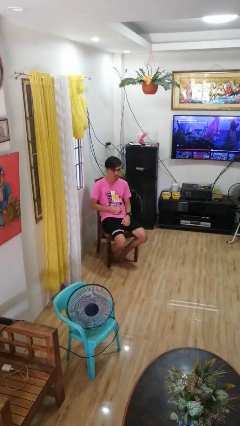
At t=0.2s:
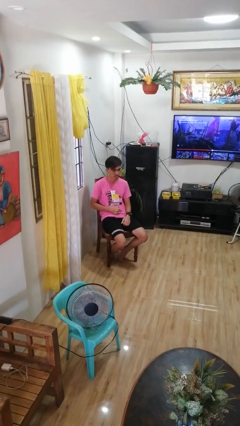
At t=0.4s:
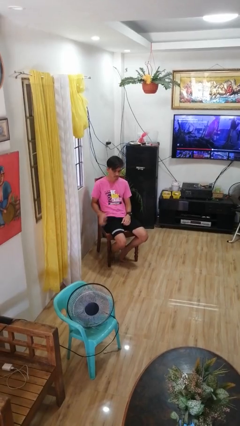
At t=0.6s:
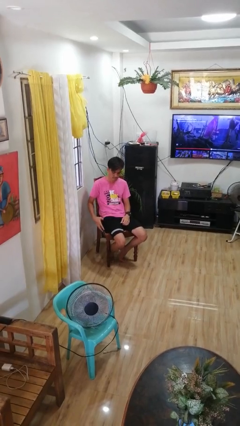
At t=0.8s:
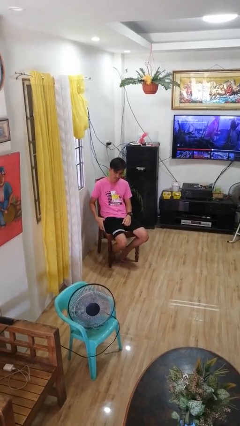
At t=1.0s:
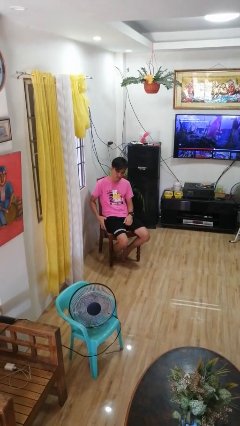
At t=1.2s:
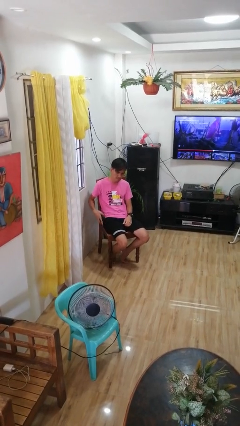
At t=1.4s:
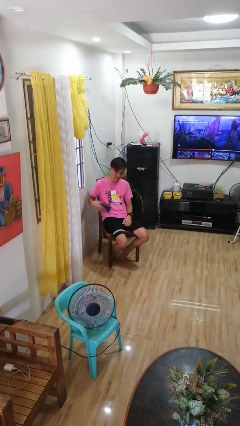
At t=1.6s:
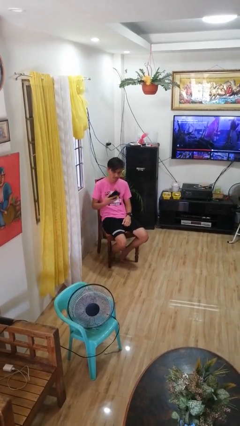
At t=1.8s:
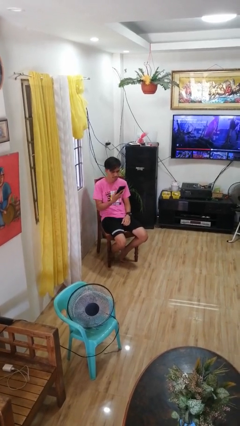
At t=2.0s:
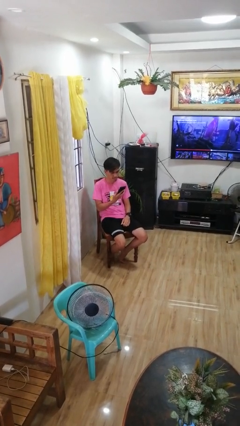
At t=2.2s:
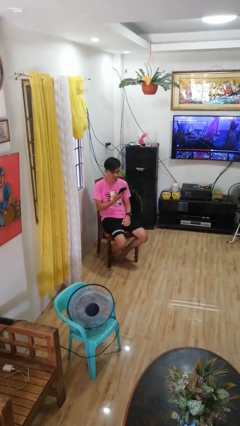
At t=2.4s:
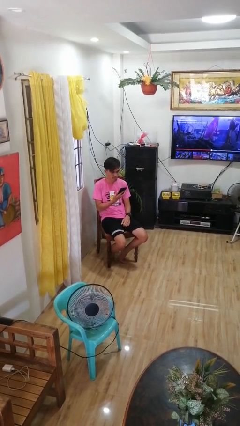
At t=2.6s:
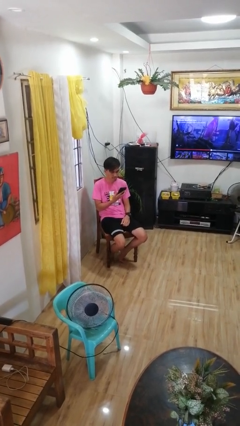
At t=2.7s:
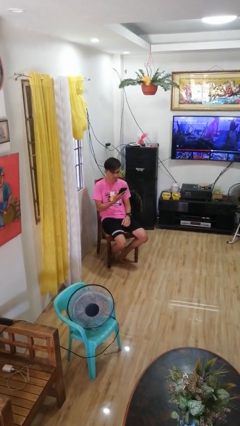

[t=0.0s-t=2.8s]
person takes phone from pocket

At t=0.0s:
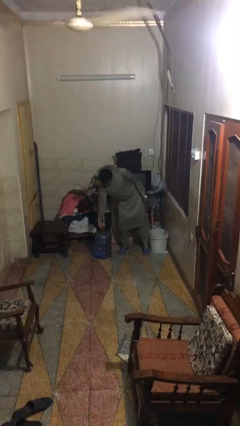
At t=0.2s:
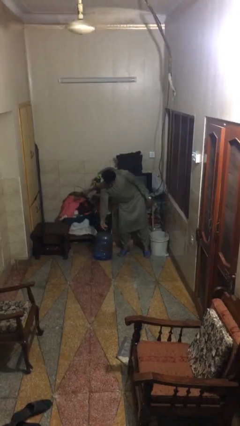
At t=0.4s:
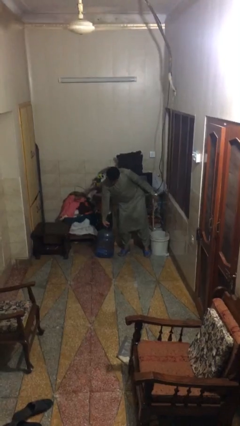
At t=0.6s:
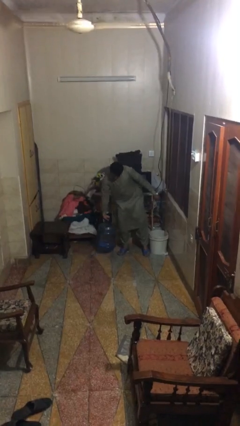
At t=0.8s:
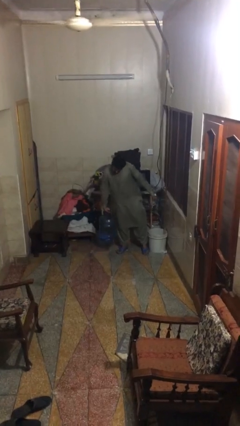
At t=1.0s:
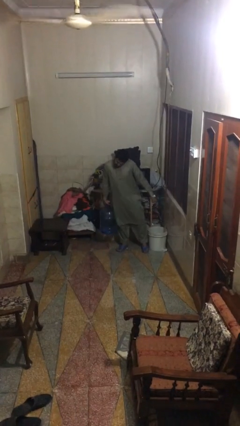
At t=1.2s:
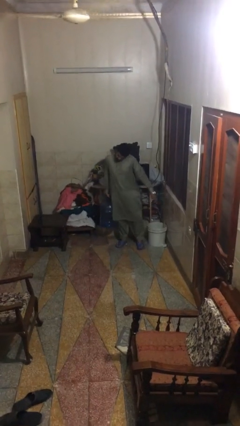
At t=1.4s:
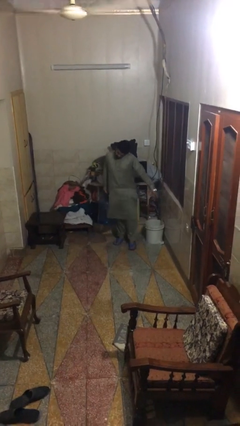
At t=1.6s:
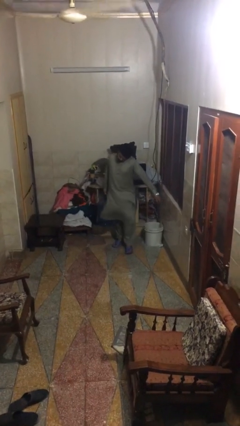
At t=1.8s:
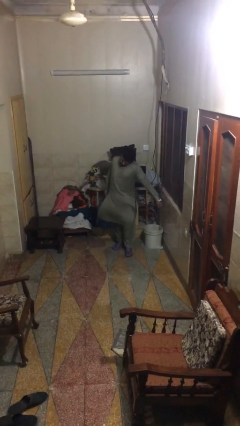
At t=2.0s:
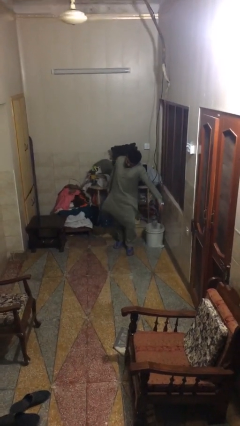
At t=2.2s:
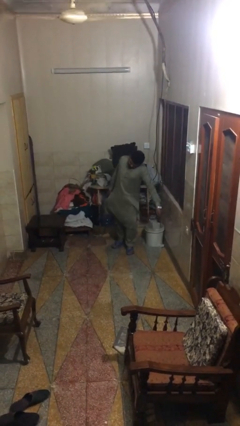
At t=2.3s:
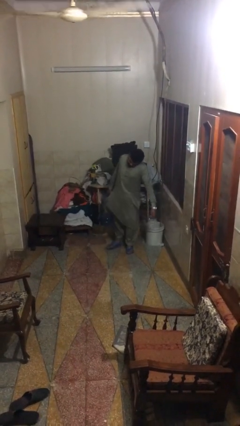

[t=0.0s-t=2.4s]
person picks up object from floor

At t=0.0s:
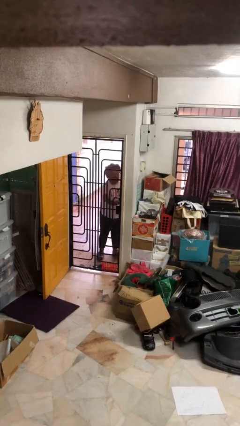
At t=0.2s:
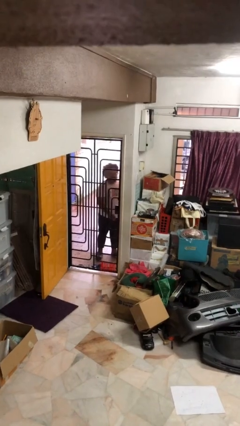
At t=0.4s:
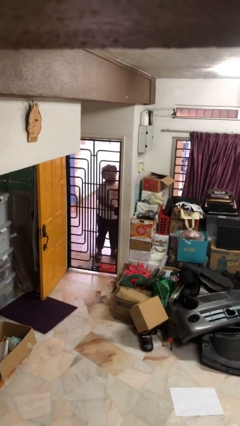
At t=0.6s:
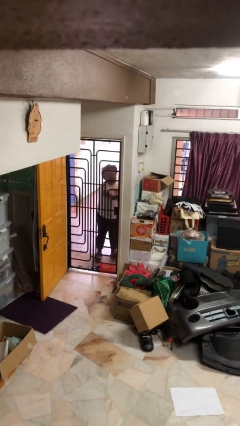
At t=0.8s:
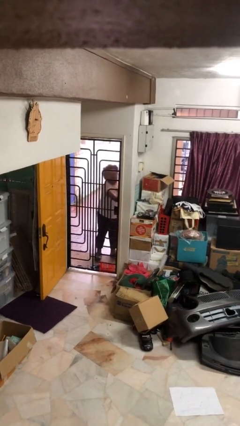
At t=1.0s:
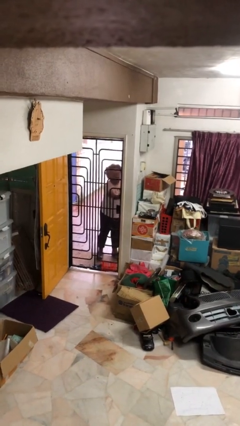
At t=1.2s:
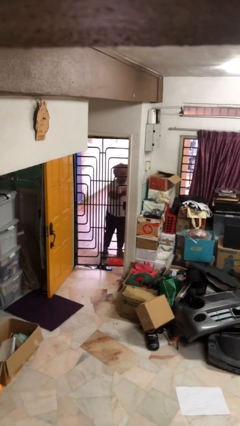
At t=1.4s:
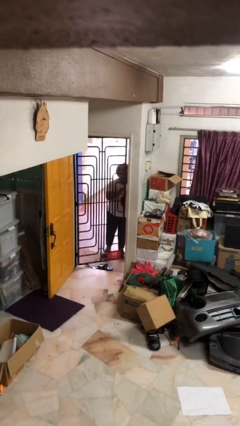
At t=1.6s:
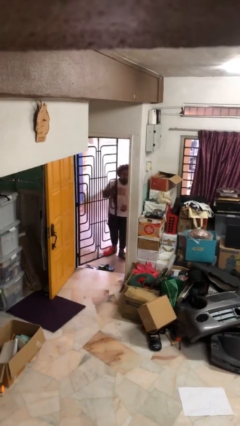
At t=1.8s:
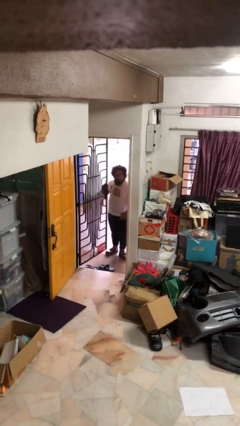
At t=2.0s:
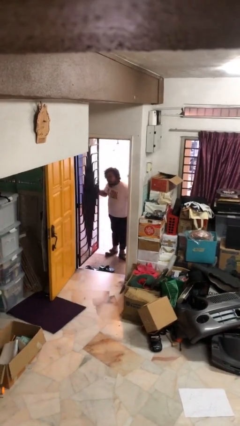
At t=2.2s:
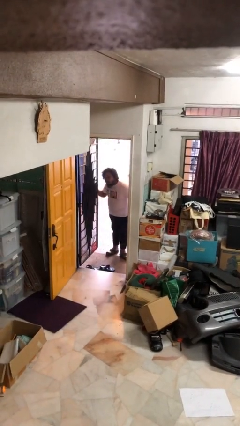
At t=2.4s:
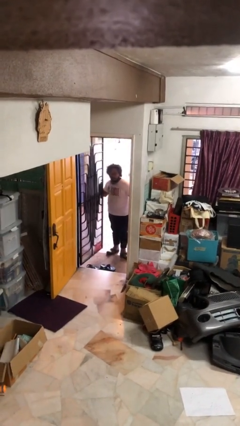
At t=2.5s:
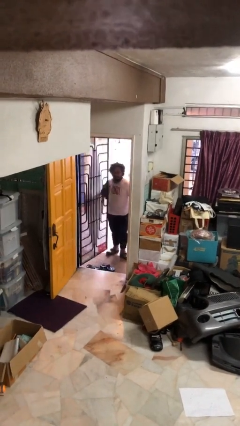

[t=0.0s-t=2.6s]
person opens facility door

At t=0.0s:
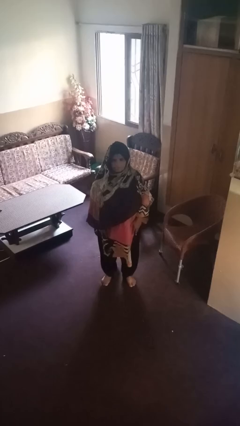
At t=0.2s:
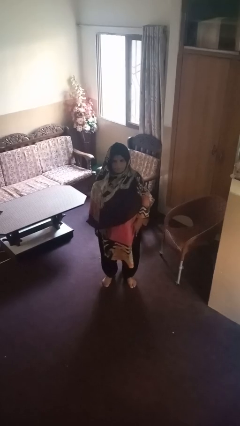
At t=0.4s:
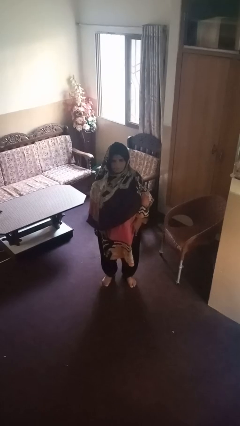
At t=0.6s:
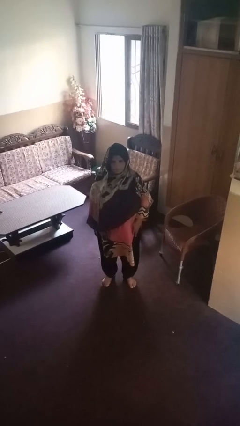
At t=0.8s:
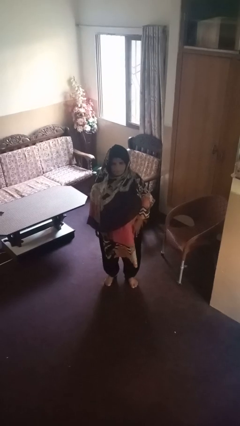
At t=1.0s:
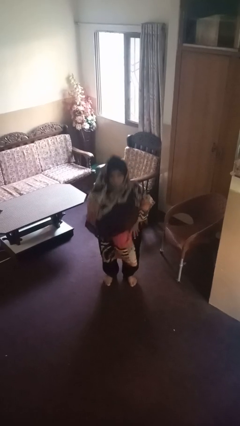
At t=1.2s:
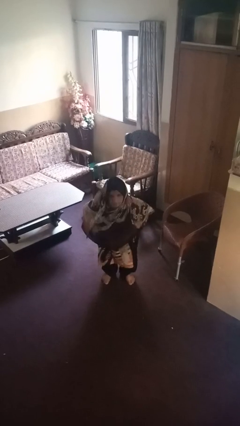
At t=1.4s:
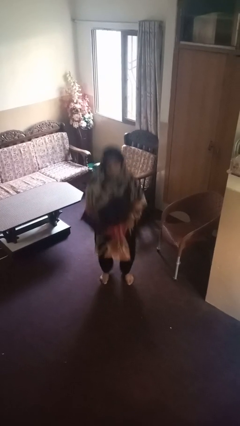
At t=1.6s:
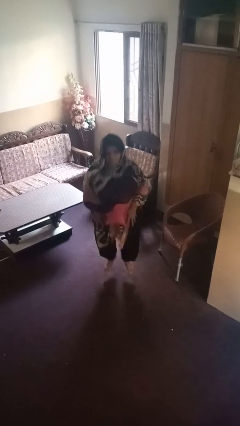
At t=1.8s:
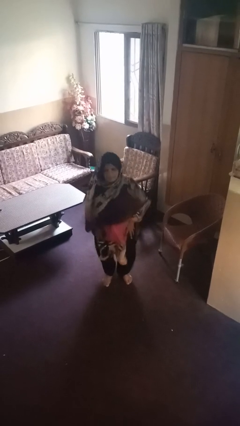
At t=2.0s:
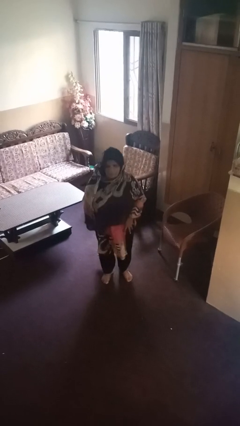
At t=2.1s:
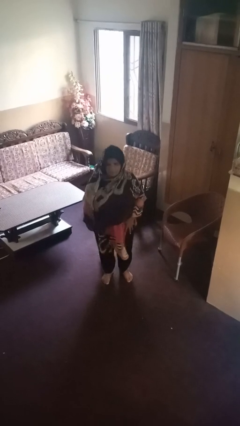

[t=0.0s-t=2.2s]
person jumps

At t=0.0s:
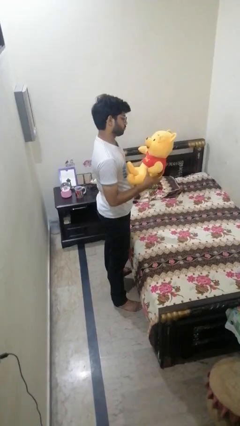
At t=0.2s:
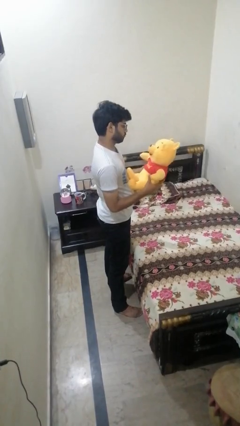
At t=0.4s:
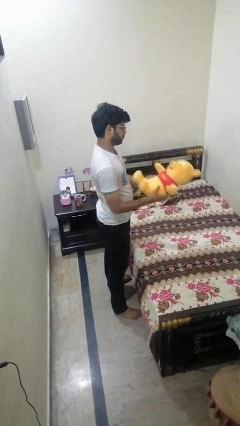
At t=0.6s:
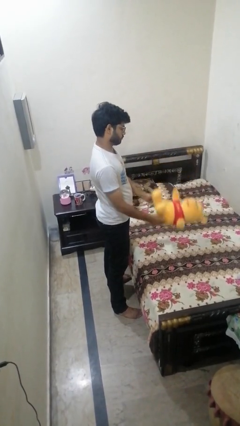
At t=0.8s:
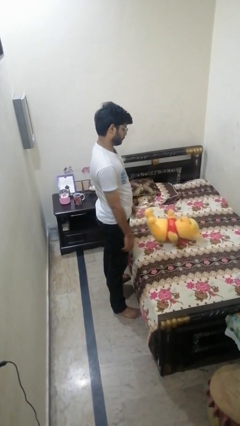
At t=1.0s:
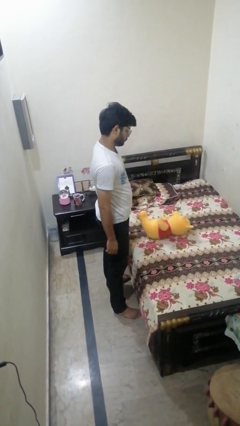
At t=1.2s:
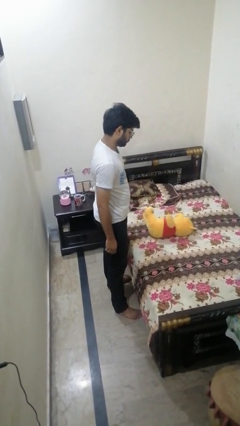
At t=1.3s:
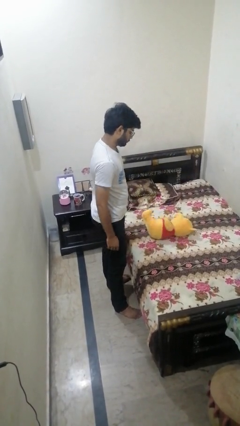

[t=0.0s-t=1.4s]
person puts down object on bed

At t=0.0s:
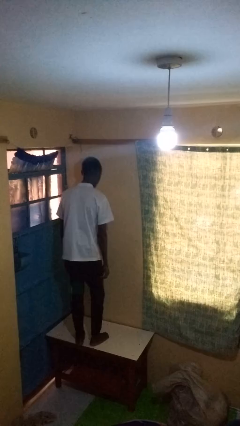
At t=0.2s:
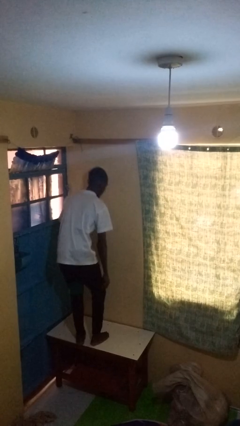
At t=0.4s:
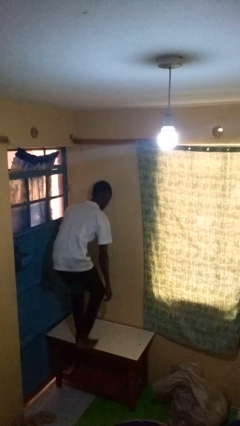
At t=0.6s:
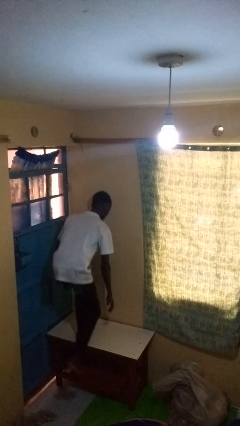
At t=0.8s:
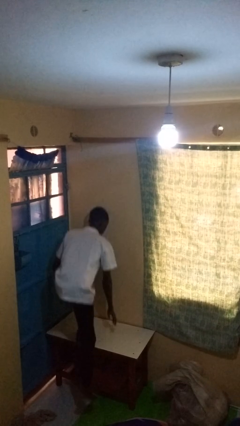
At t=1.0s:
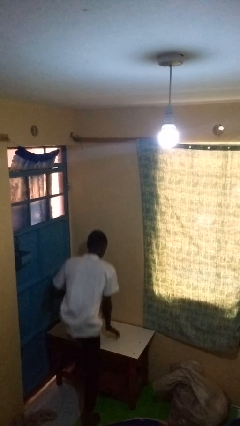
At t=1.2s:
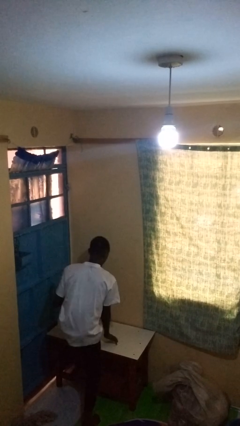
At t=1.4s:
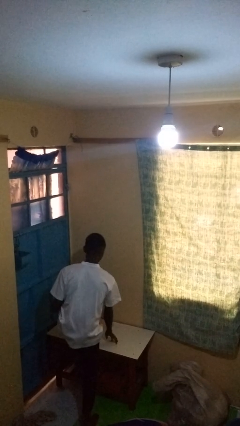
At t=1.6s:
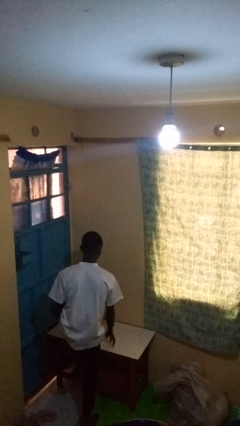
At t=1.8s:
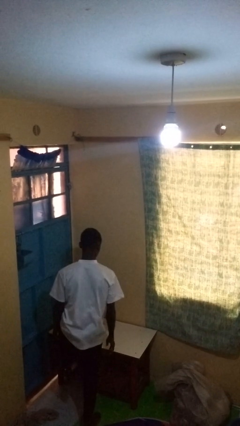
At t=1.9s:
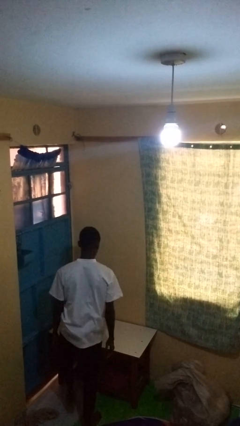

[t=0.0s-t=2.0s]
person climbs off table

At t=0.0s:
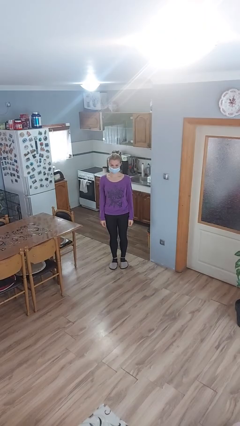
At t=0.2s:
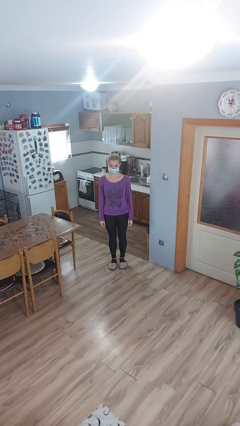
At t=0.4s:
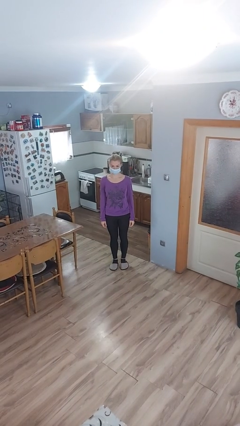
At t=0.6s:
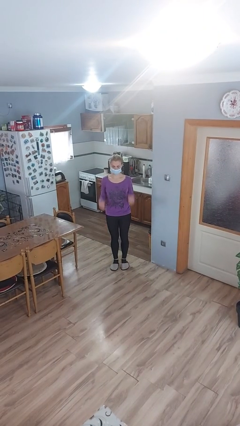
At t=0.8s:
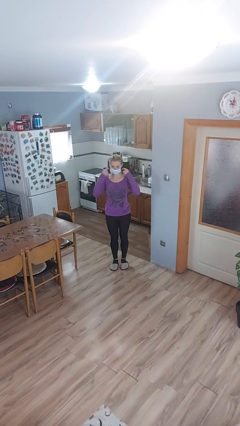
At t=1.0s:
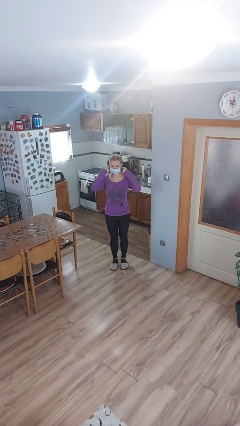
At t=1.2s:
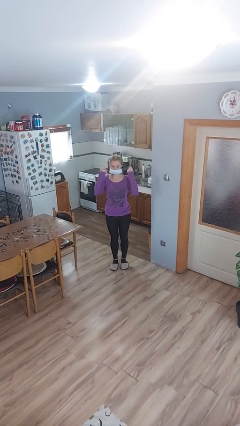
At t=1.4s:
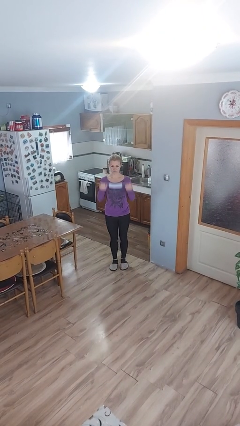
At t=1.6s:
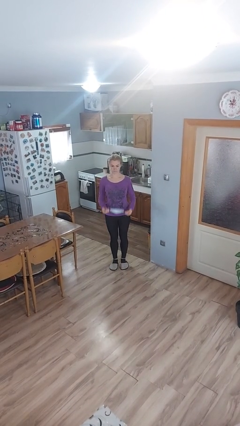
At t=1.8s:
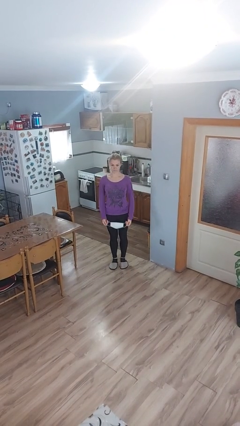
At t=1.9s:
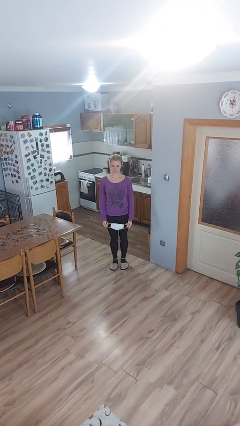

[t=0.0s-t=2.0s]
person takes off facemask

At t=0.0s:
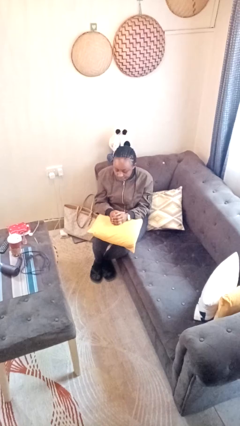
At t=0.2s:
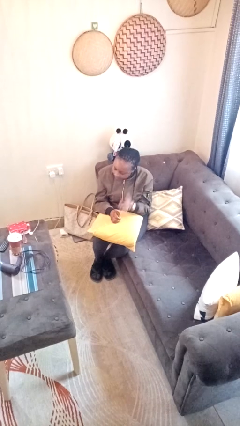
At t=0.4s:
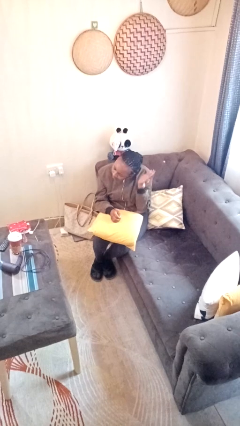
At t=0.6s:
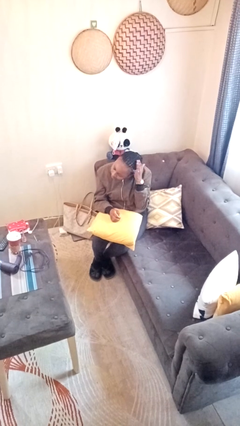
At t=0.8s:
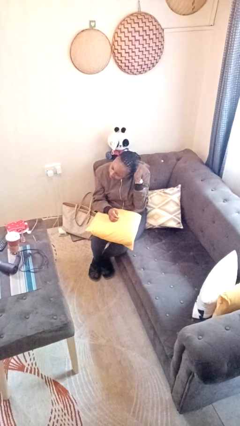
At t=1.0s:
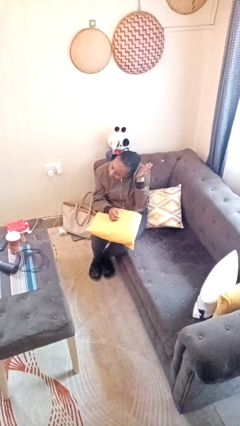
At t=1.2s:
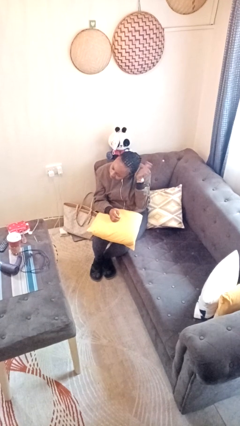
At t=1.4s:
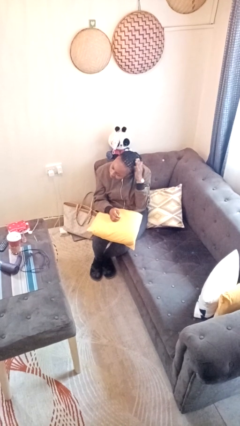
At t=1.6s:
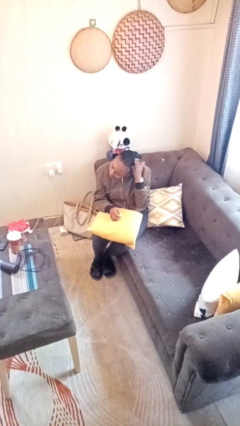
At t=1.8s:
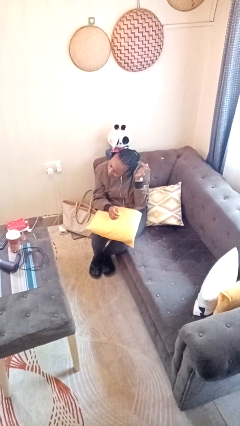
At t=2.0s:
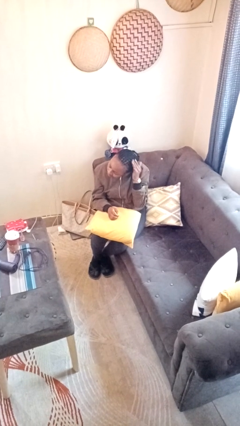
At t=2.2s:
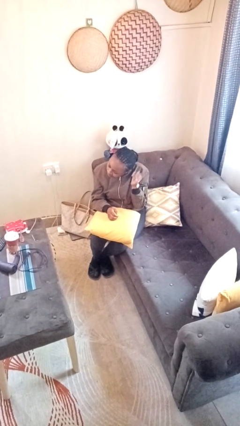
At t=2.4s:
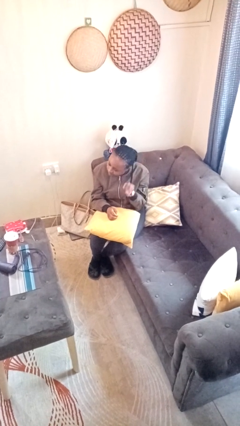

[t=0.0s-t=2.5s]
person pats head
